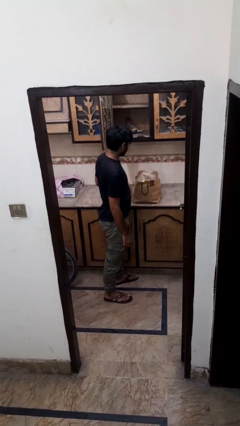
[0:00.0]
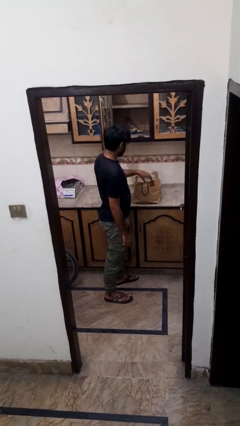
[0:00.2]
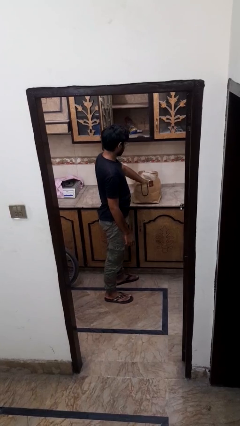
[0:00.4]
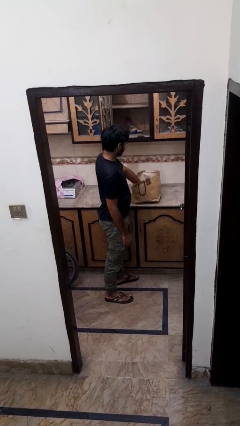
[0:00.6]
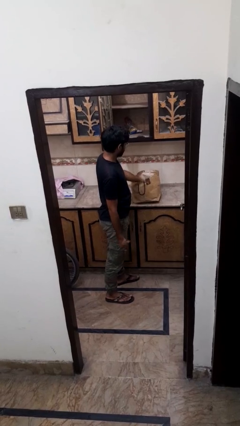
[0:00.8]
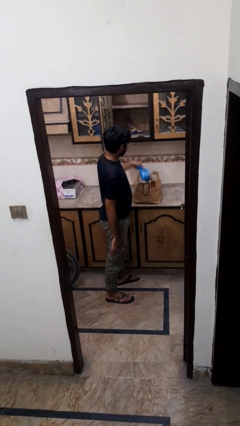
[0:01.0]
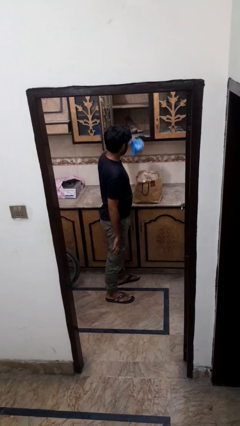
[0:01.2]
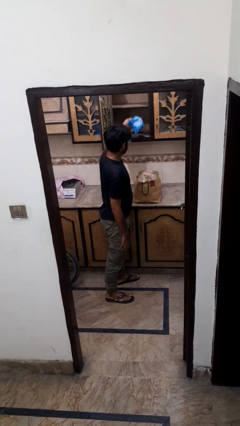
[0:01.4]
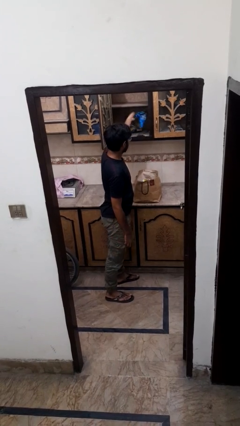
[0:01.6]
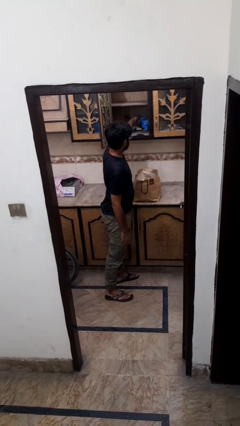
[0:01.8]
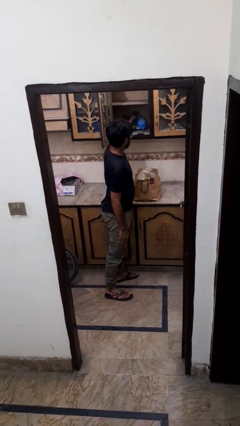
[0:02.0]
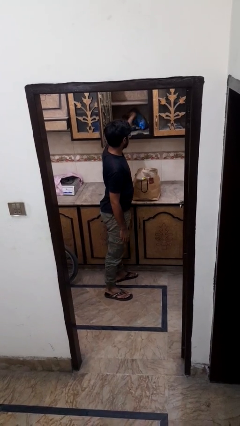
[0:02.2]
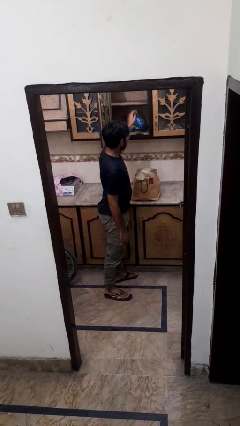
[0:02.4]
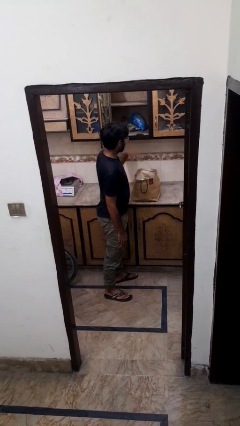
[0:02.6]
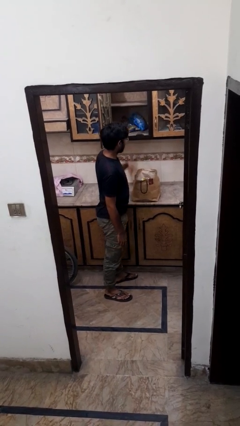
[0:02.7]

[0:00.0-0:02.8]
person loads groceries into cabinet

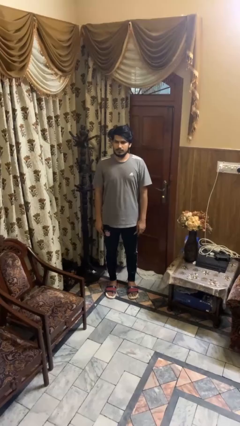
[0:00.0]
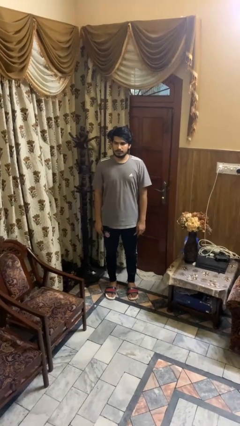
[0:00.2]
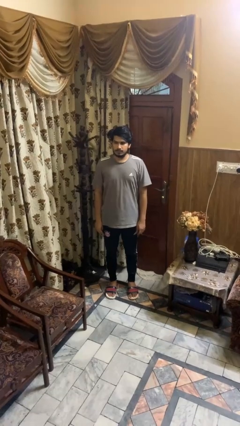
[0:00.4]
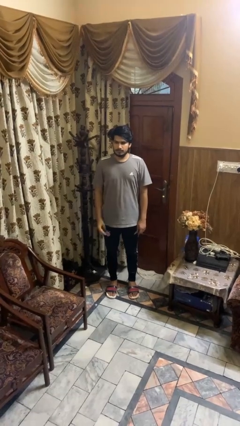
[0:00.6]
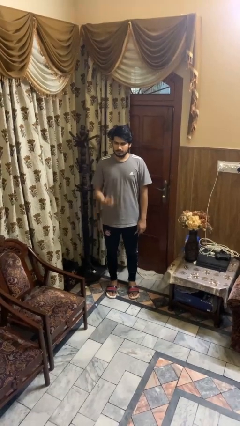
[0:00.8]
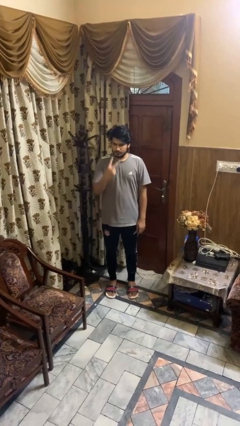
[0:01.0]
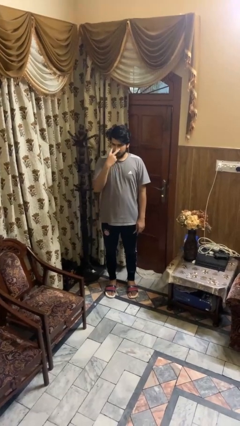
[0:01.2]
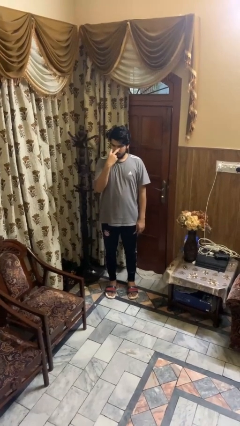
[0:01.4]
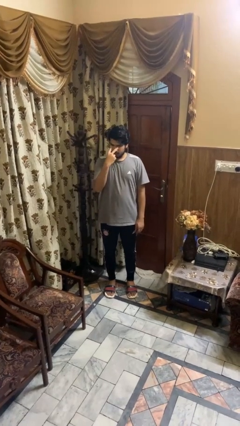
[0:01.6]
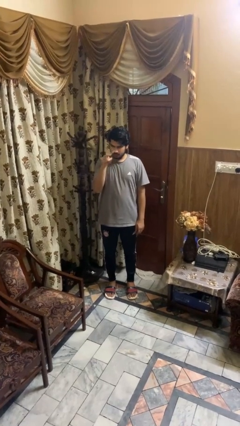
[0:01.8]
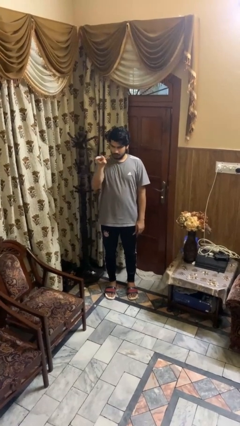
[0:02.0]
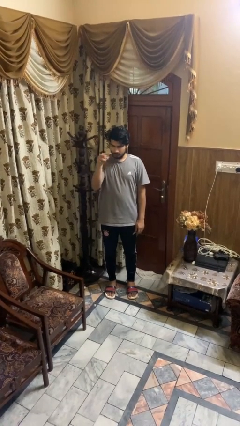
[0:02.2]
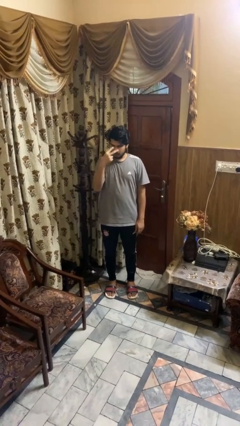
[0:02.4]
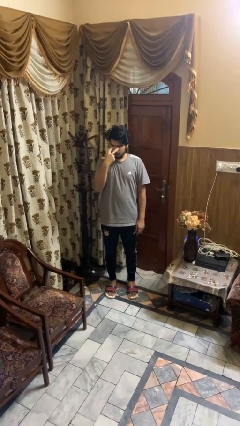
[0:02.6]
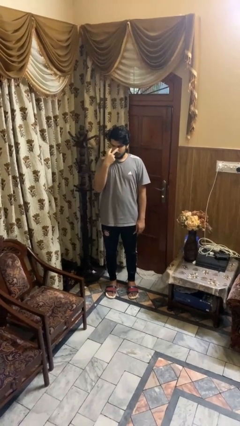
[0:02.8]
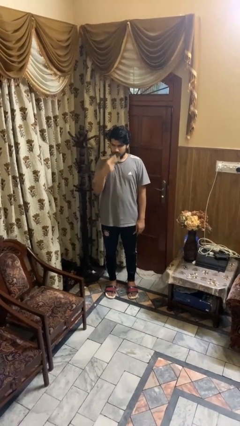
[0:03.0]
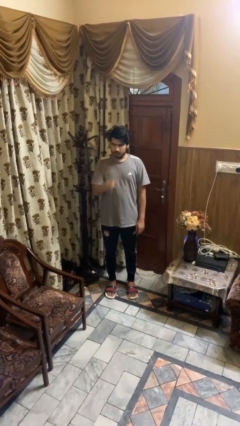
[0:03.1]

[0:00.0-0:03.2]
person gestures watch closely

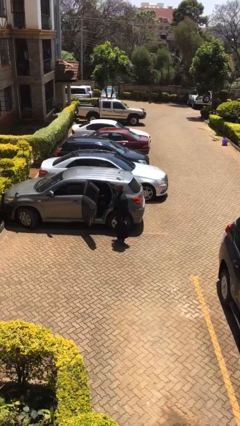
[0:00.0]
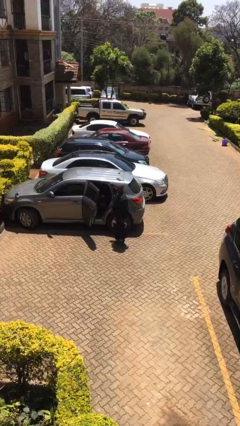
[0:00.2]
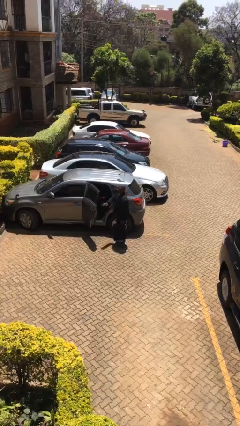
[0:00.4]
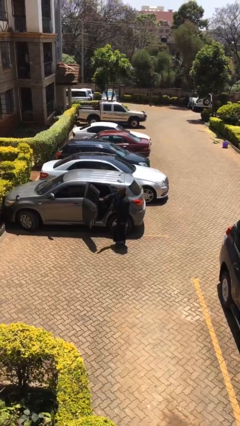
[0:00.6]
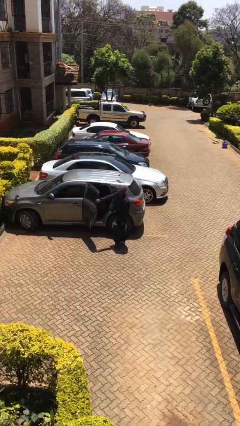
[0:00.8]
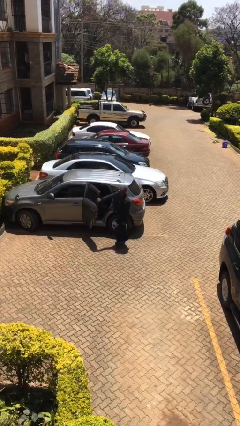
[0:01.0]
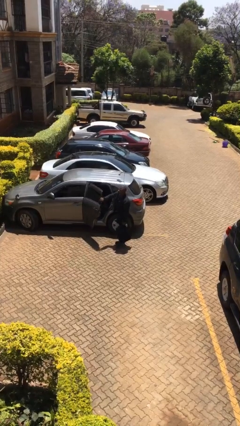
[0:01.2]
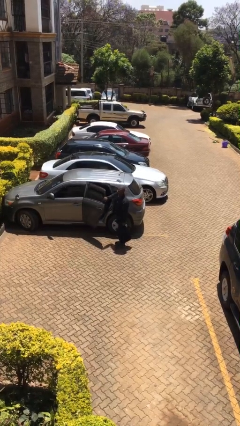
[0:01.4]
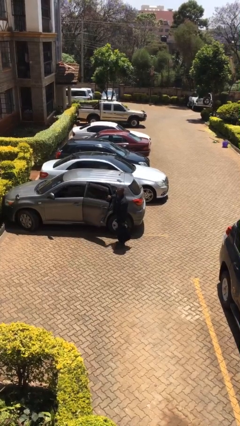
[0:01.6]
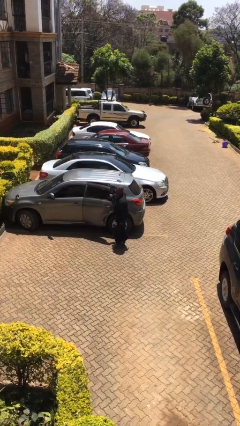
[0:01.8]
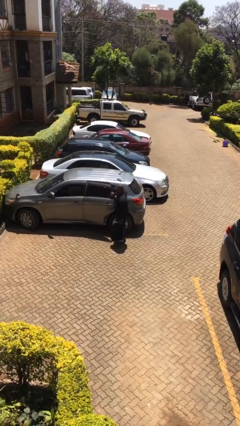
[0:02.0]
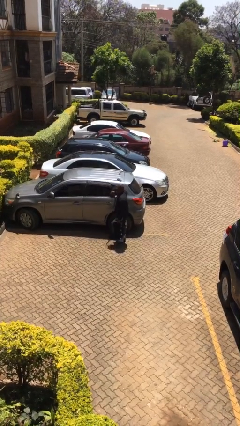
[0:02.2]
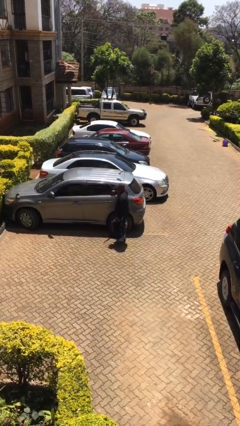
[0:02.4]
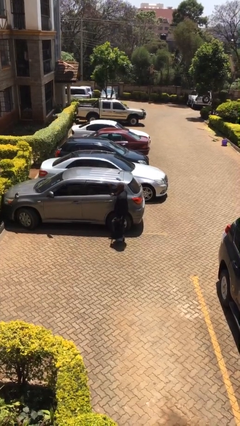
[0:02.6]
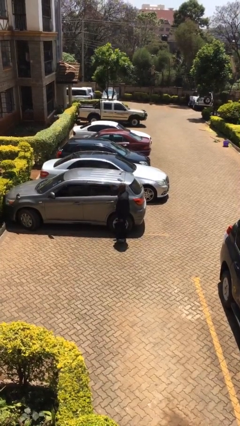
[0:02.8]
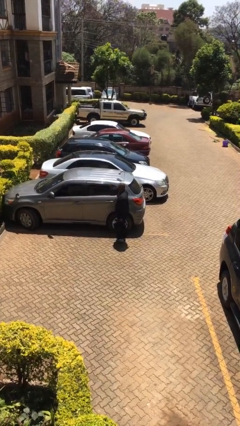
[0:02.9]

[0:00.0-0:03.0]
person closes car door

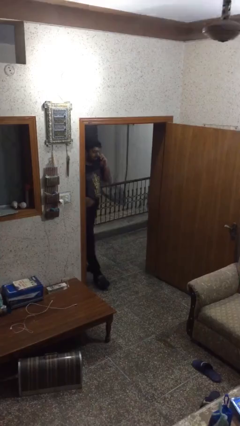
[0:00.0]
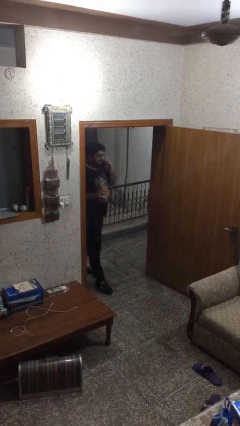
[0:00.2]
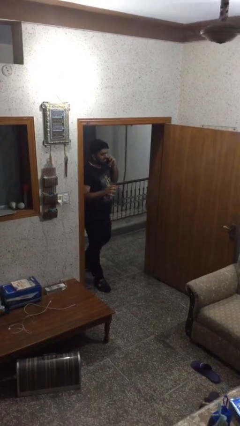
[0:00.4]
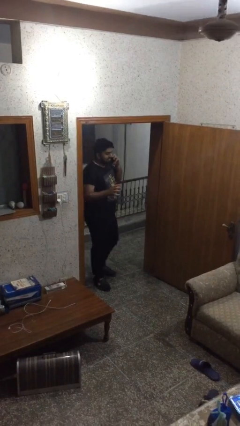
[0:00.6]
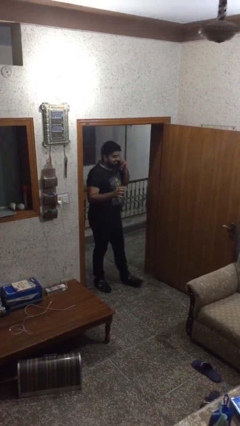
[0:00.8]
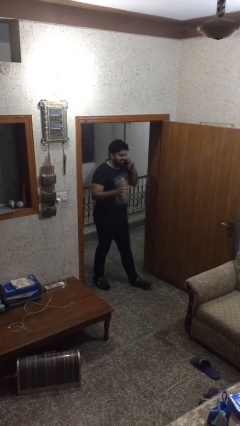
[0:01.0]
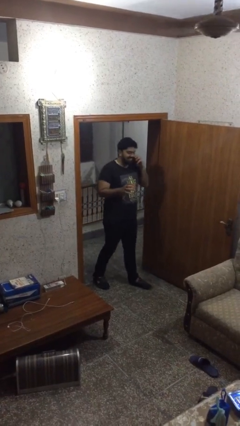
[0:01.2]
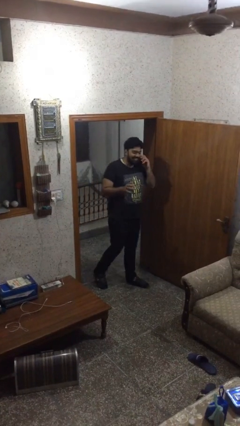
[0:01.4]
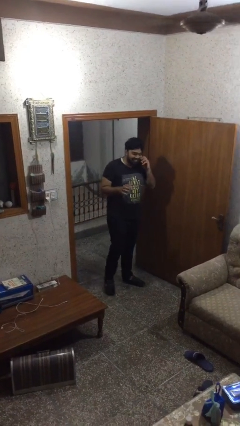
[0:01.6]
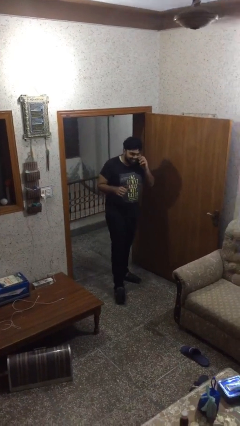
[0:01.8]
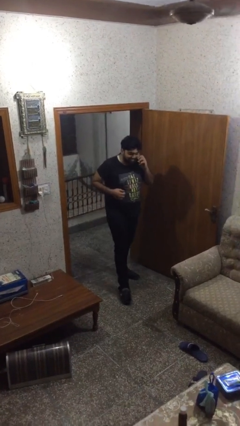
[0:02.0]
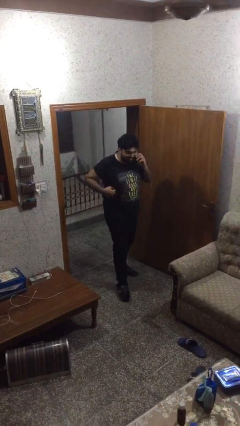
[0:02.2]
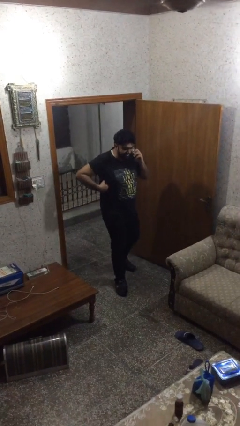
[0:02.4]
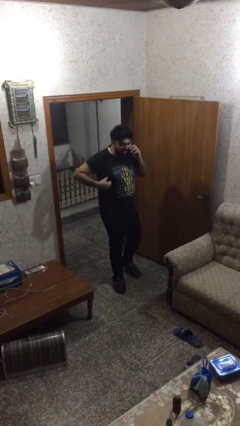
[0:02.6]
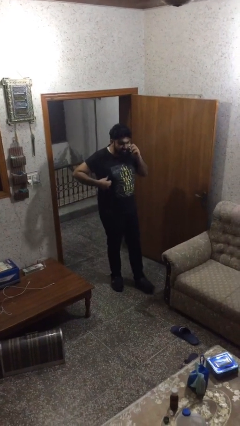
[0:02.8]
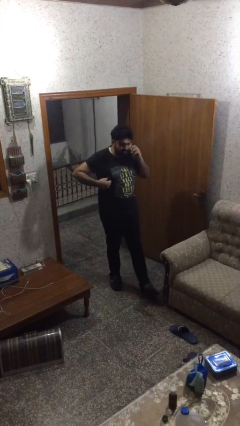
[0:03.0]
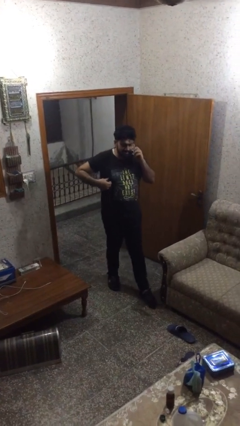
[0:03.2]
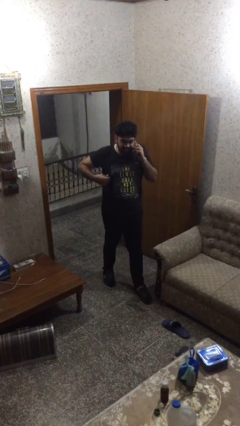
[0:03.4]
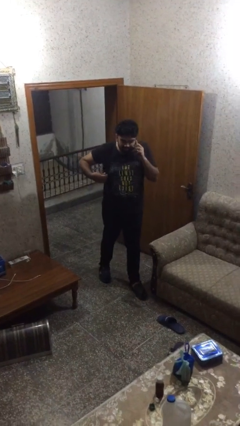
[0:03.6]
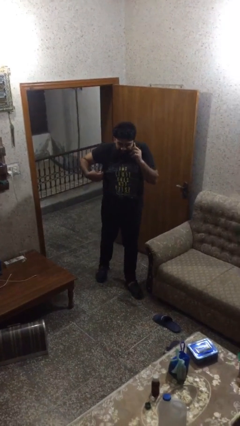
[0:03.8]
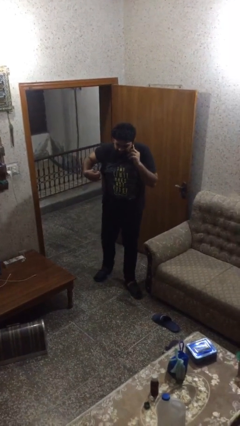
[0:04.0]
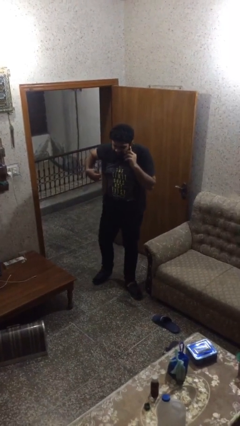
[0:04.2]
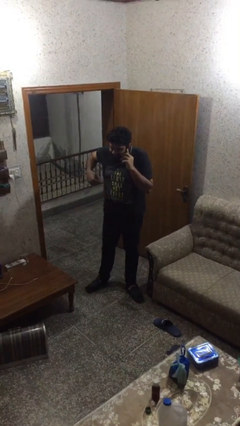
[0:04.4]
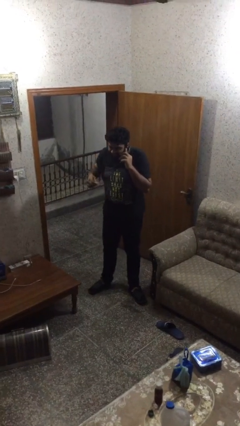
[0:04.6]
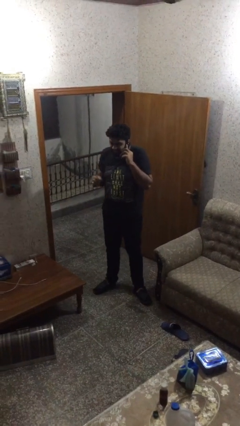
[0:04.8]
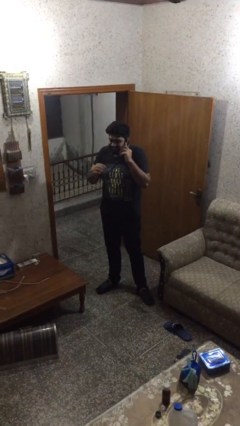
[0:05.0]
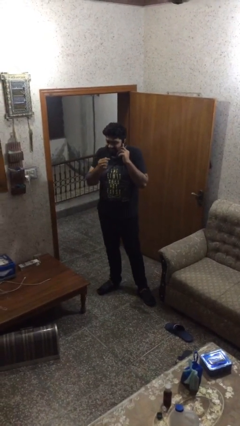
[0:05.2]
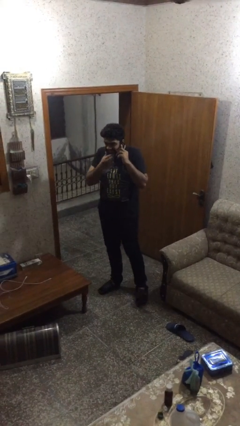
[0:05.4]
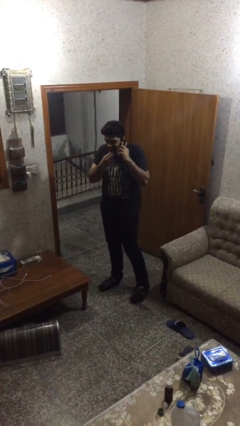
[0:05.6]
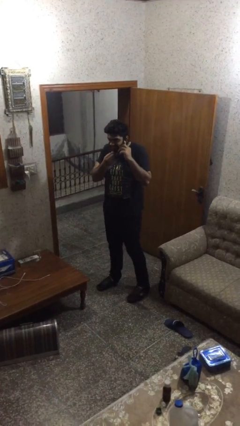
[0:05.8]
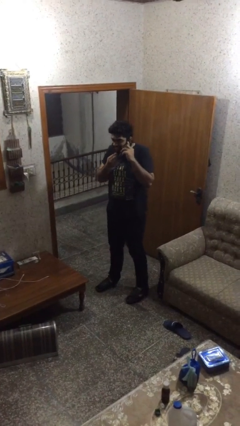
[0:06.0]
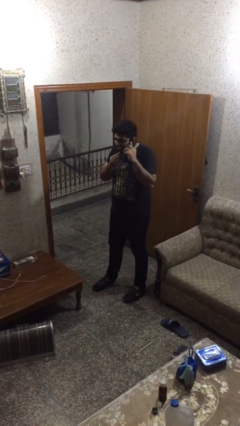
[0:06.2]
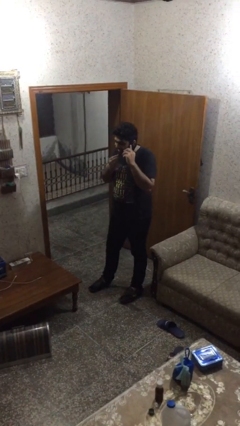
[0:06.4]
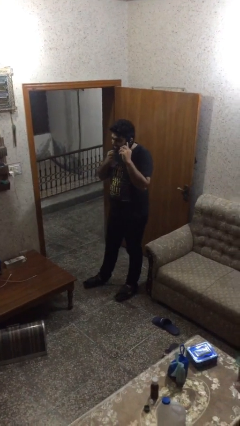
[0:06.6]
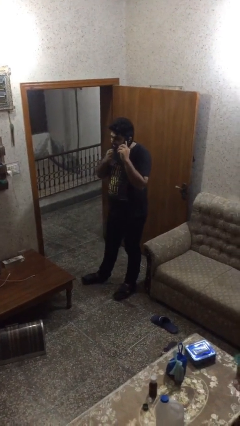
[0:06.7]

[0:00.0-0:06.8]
person enters scene through structure

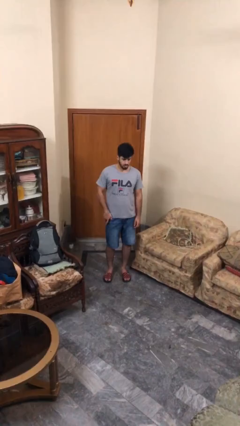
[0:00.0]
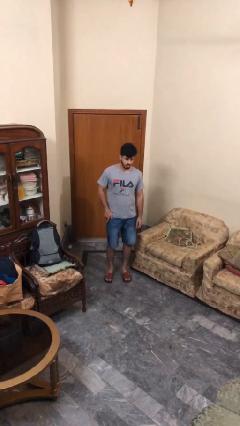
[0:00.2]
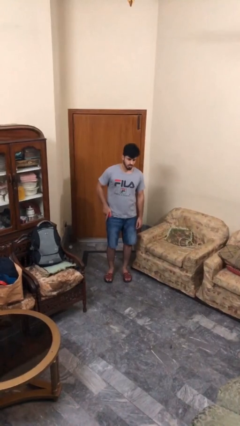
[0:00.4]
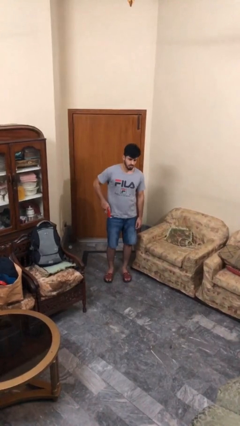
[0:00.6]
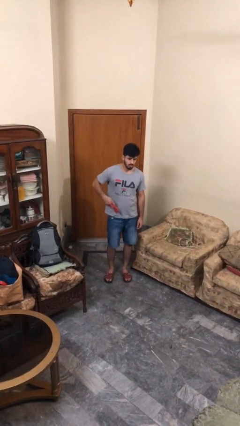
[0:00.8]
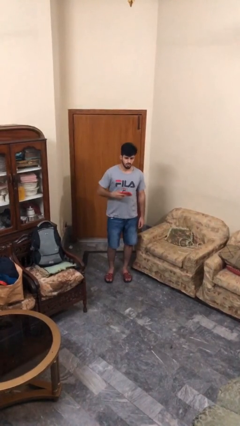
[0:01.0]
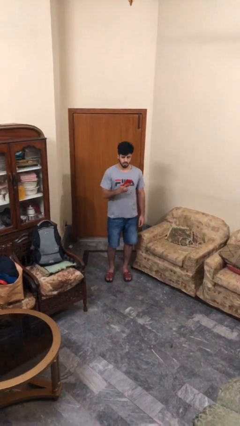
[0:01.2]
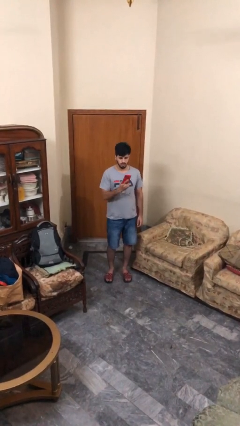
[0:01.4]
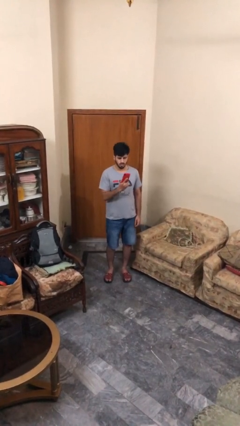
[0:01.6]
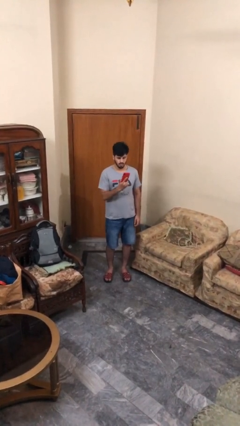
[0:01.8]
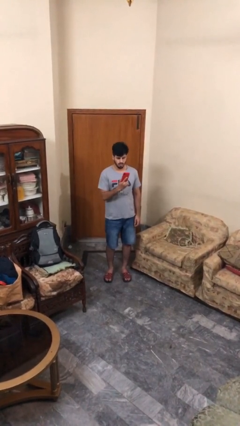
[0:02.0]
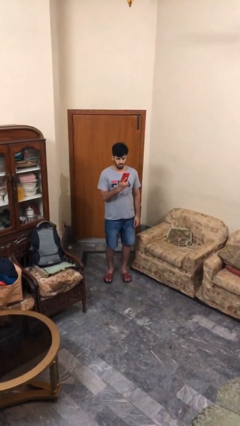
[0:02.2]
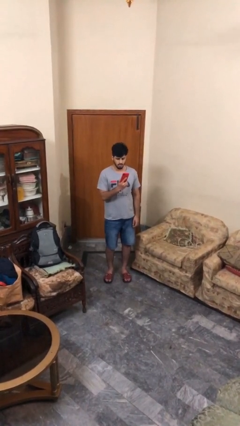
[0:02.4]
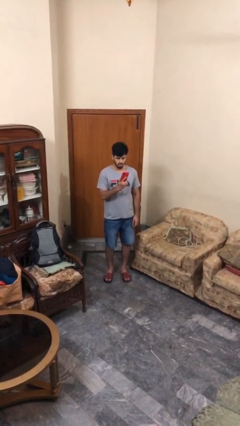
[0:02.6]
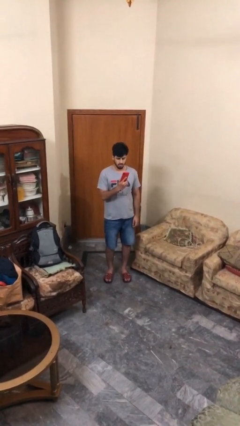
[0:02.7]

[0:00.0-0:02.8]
person takes phone from pocket
